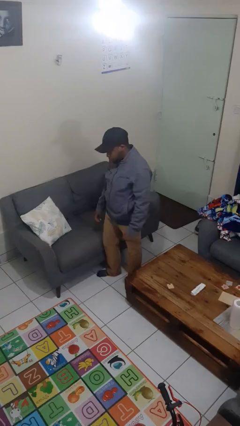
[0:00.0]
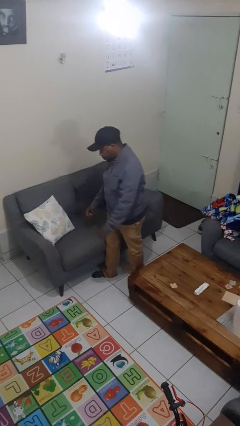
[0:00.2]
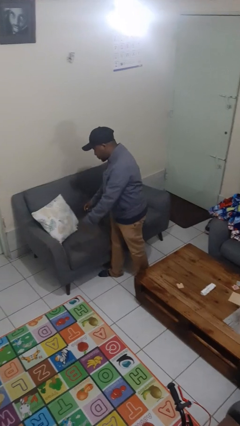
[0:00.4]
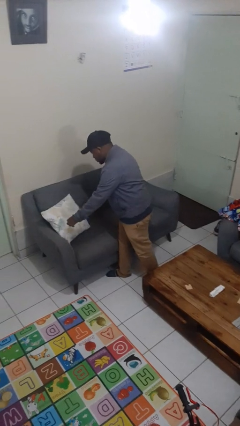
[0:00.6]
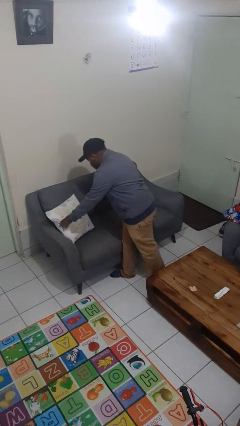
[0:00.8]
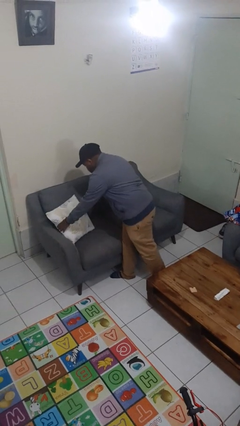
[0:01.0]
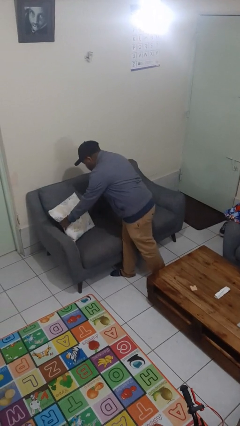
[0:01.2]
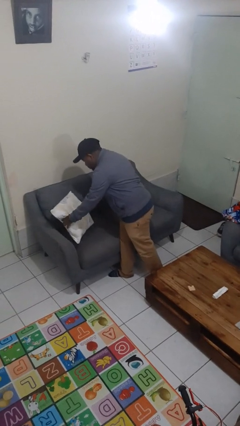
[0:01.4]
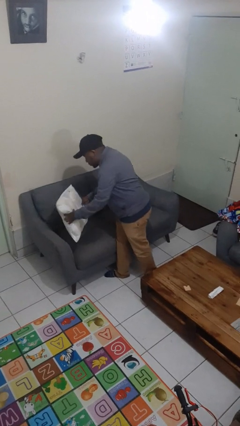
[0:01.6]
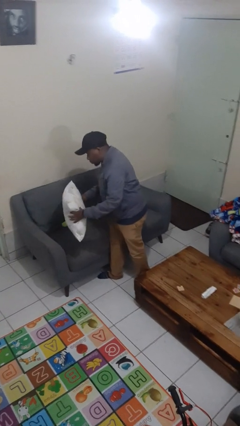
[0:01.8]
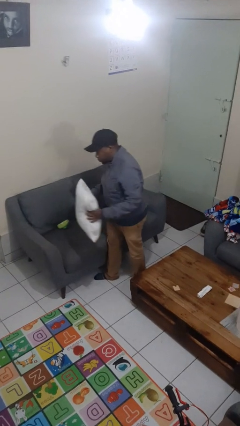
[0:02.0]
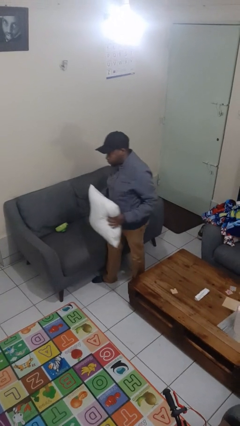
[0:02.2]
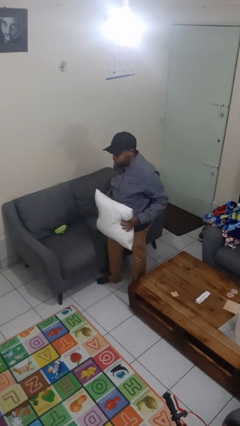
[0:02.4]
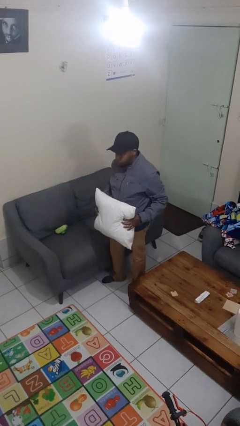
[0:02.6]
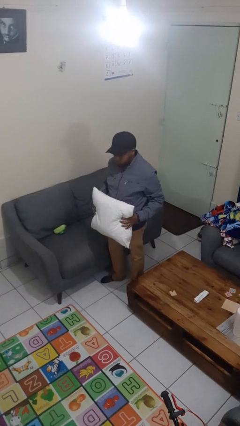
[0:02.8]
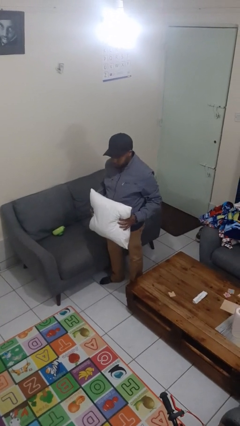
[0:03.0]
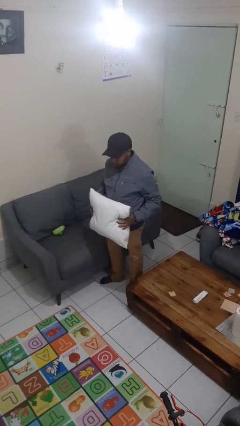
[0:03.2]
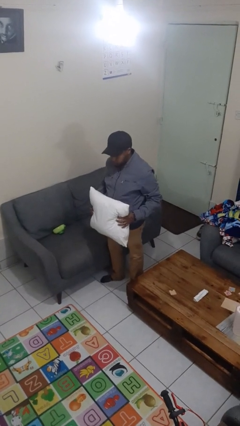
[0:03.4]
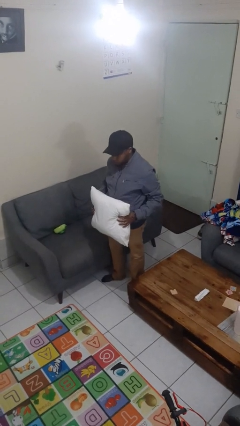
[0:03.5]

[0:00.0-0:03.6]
person picks up object from couch

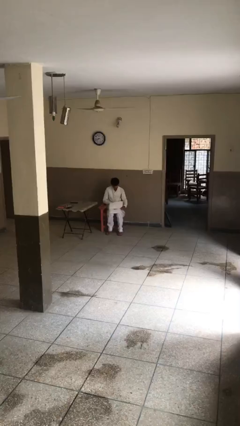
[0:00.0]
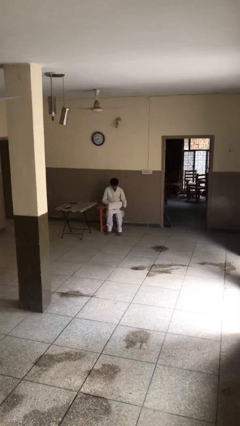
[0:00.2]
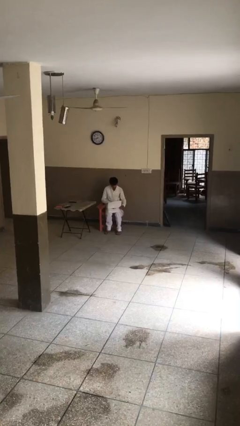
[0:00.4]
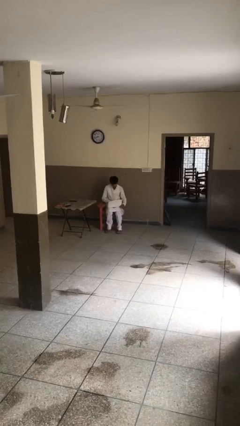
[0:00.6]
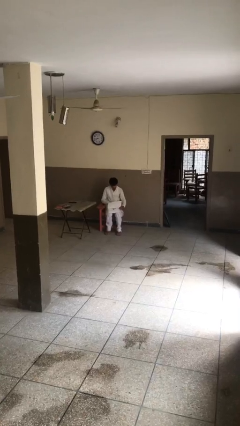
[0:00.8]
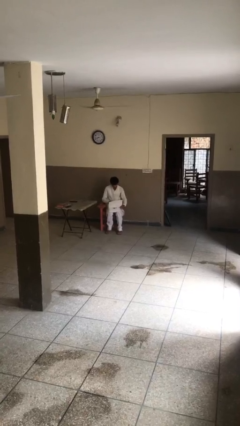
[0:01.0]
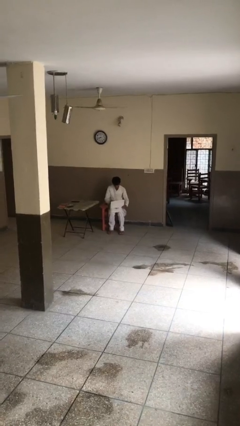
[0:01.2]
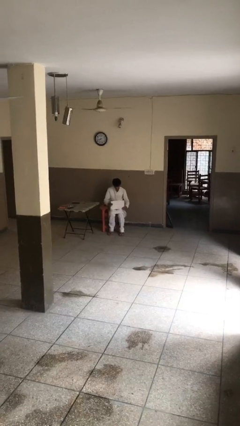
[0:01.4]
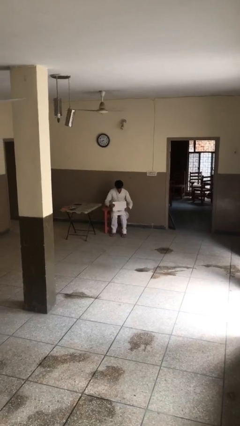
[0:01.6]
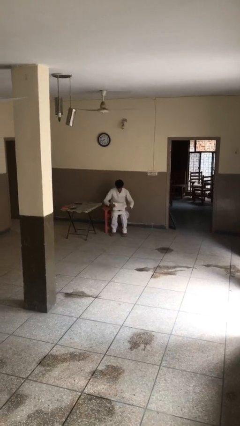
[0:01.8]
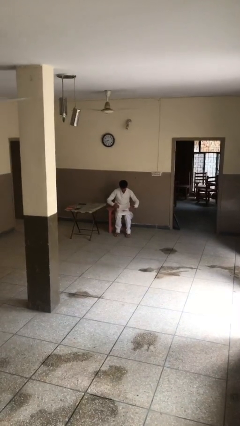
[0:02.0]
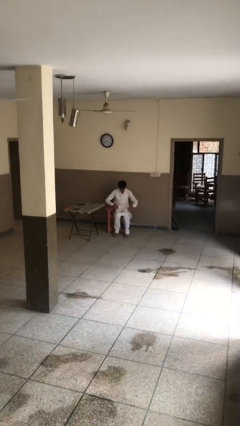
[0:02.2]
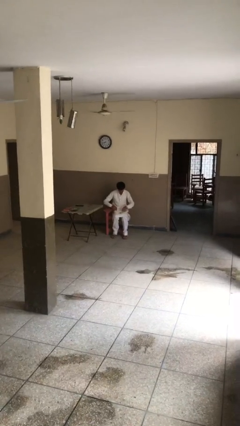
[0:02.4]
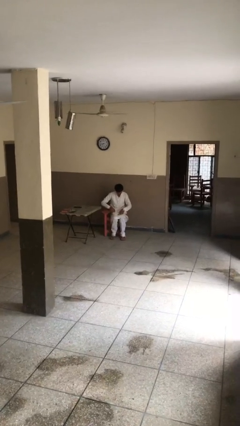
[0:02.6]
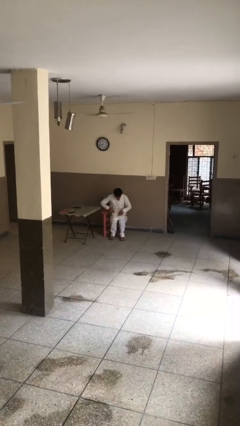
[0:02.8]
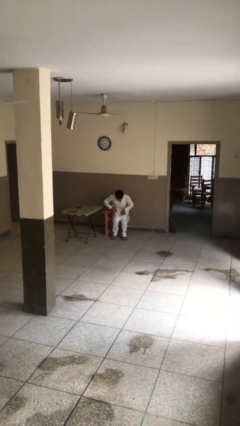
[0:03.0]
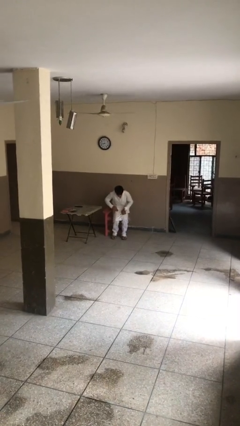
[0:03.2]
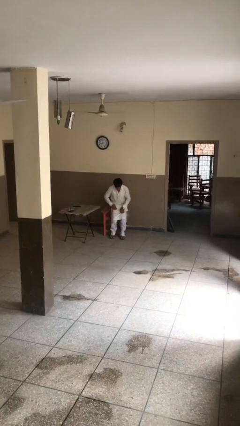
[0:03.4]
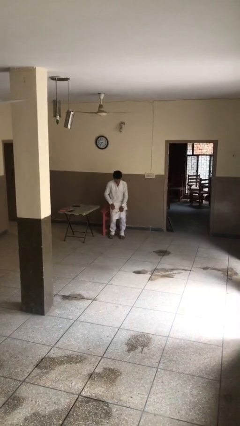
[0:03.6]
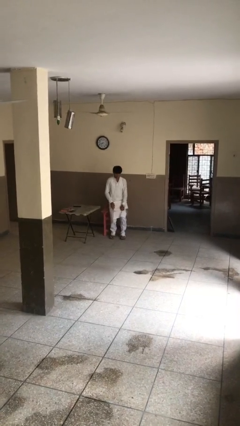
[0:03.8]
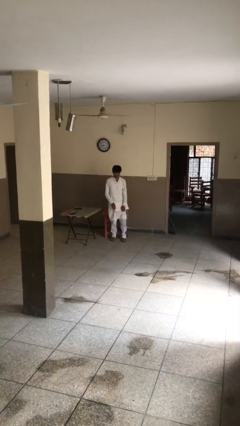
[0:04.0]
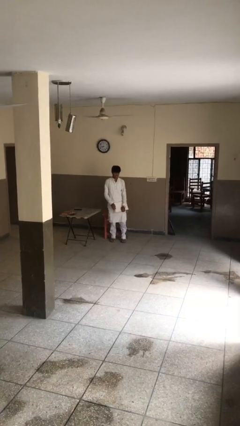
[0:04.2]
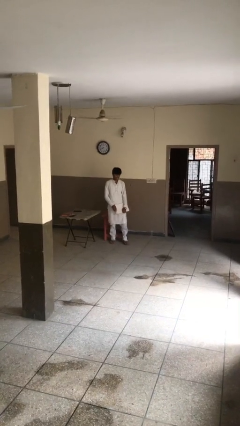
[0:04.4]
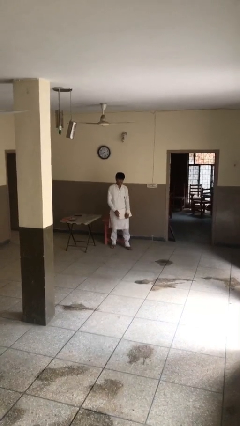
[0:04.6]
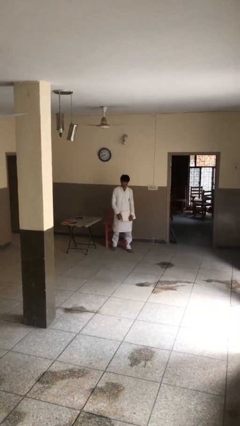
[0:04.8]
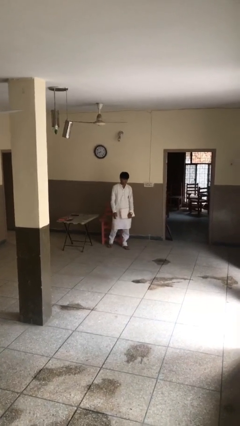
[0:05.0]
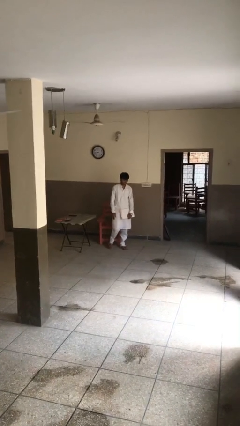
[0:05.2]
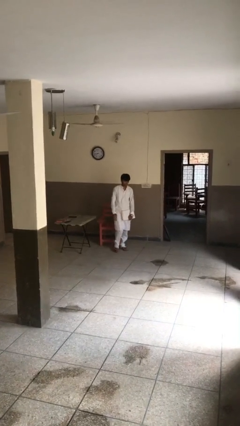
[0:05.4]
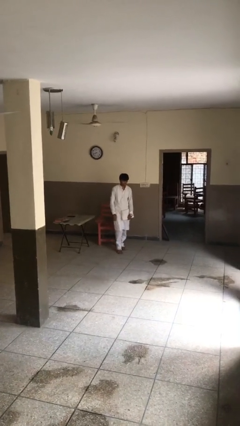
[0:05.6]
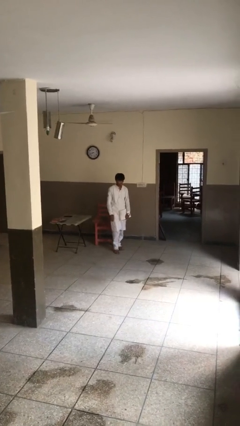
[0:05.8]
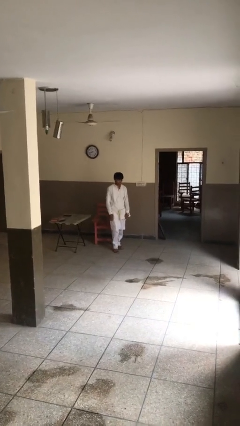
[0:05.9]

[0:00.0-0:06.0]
person stands up

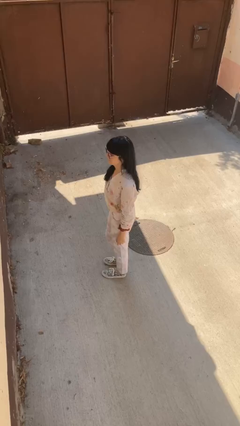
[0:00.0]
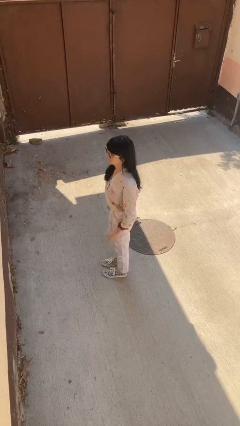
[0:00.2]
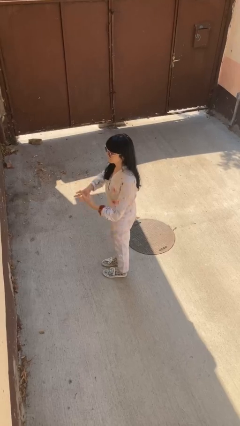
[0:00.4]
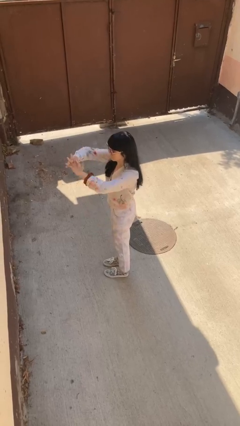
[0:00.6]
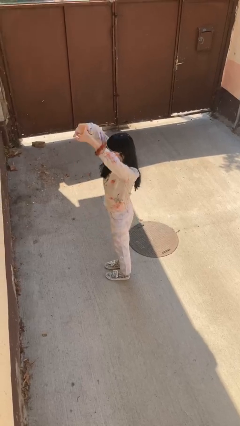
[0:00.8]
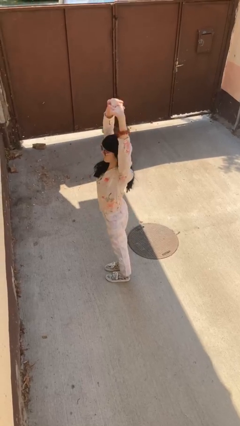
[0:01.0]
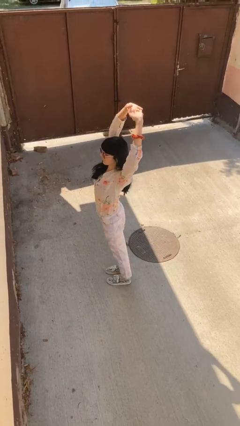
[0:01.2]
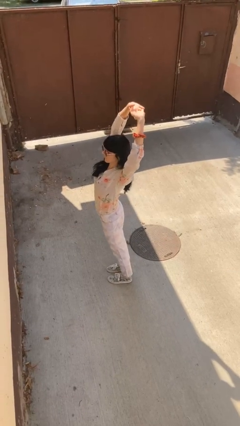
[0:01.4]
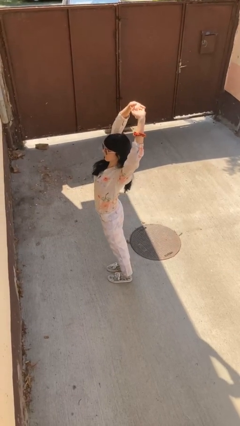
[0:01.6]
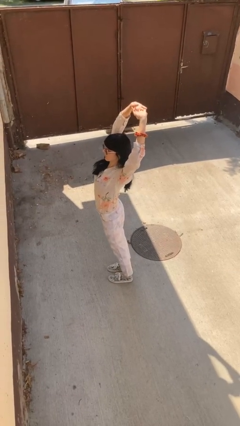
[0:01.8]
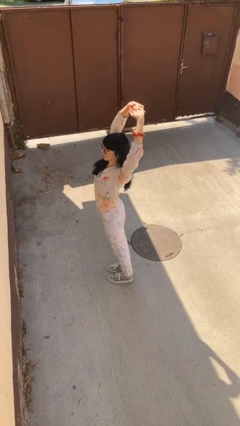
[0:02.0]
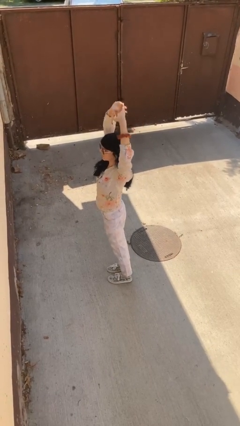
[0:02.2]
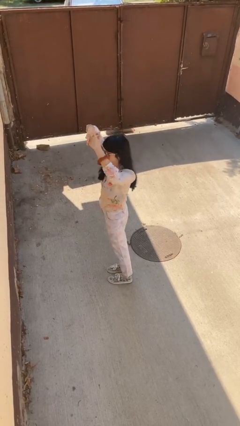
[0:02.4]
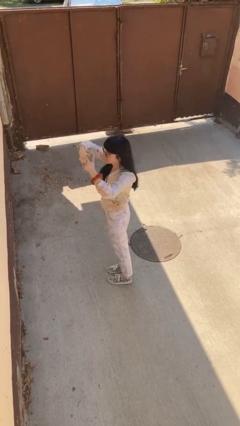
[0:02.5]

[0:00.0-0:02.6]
person stretches arms over head

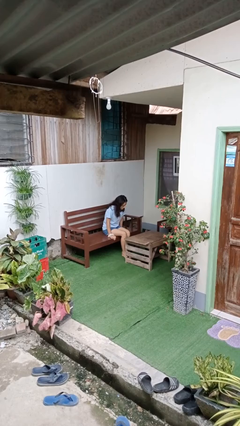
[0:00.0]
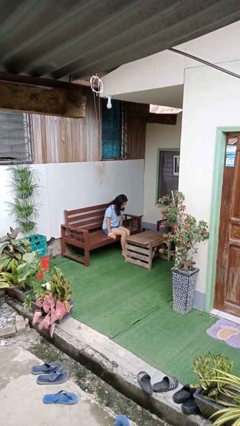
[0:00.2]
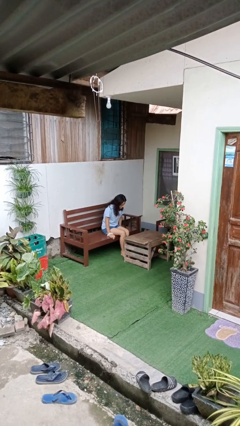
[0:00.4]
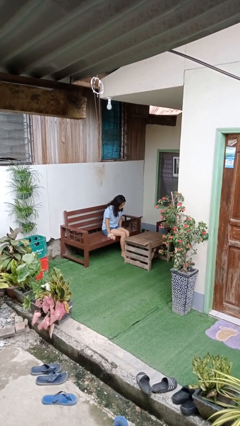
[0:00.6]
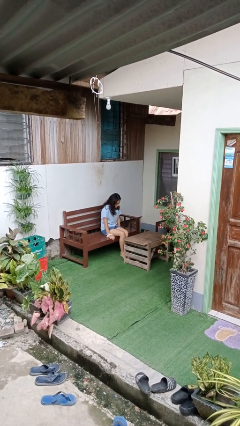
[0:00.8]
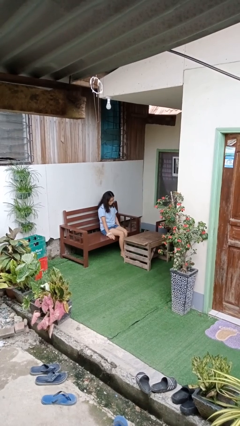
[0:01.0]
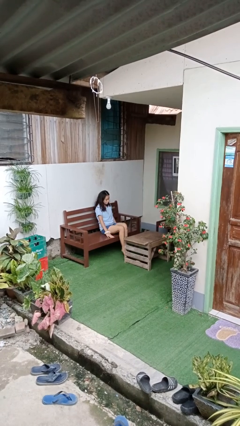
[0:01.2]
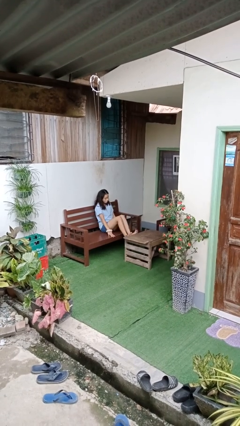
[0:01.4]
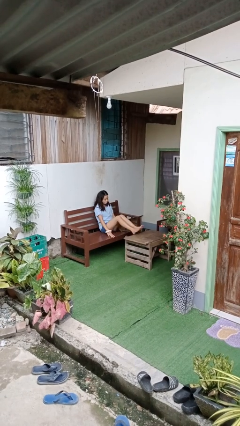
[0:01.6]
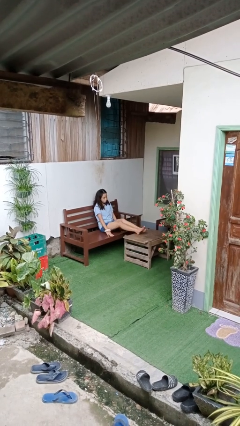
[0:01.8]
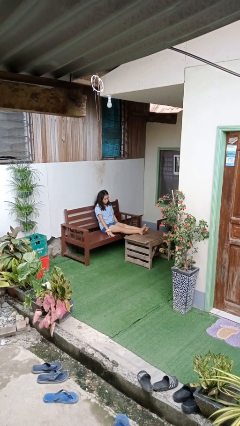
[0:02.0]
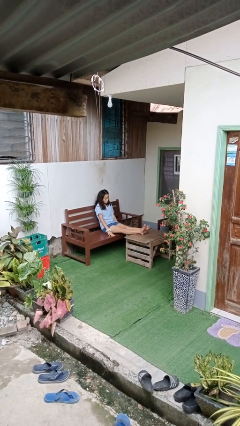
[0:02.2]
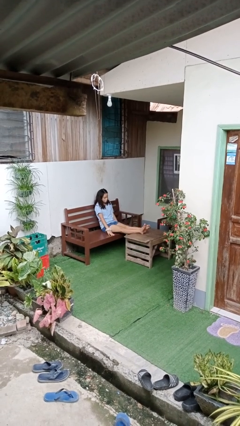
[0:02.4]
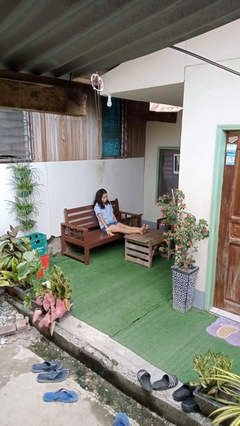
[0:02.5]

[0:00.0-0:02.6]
person puts feet up

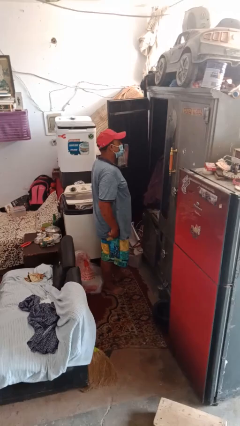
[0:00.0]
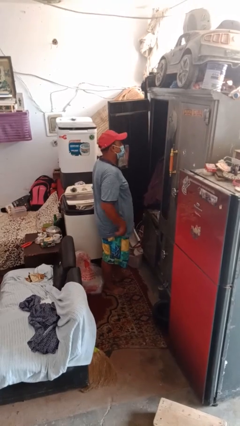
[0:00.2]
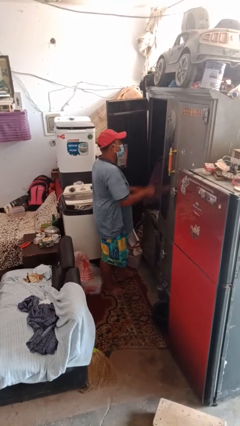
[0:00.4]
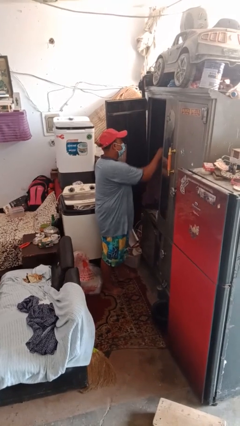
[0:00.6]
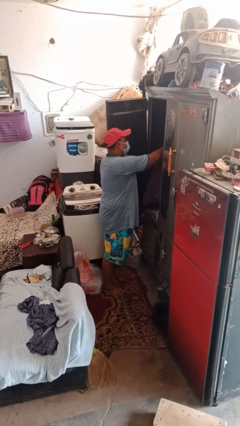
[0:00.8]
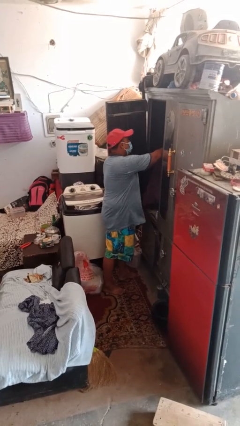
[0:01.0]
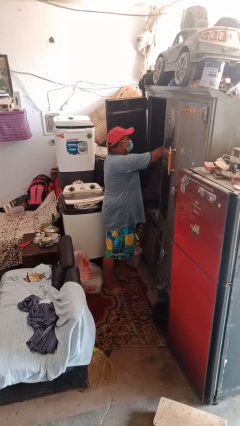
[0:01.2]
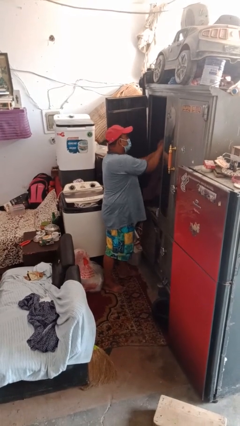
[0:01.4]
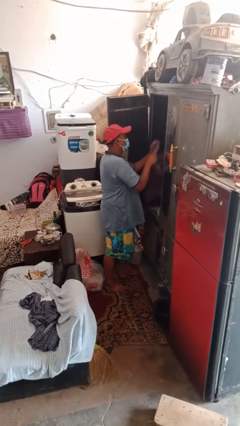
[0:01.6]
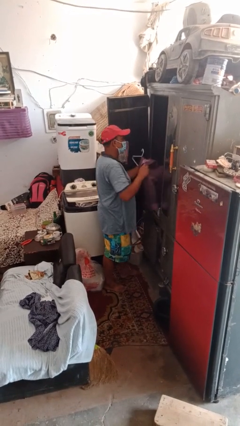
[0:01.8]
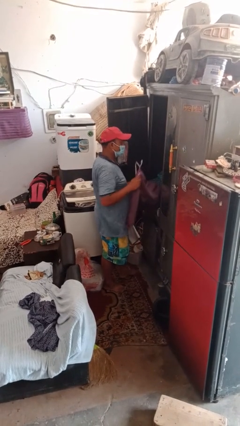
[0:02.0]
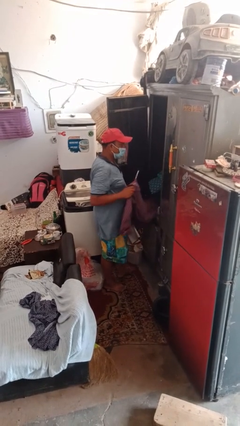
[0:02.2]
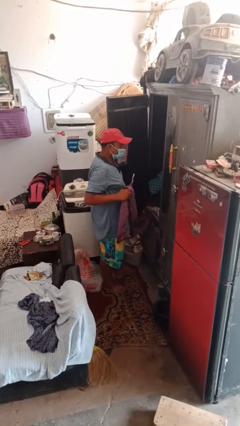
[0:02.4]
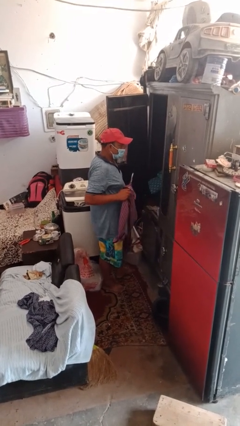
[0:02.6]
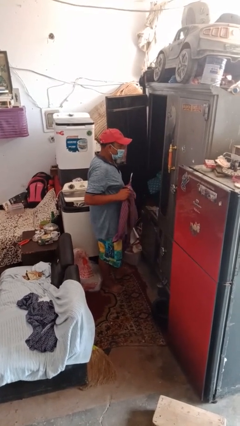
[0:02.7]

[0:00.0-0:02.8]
person takes clothes from closet

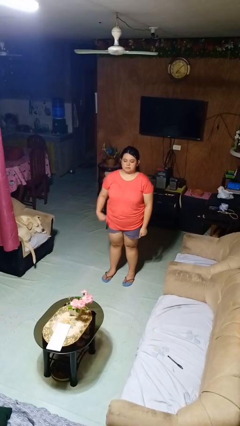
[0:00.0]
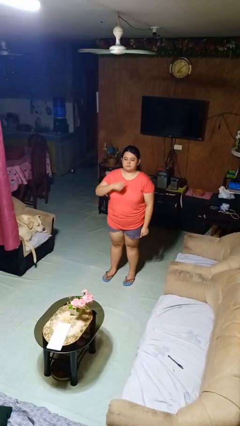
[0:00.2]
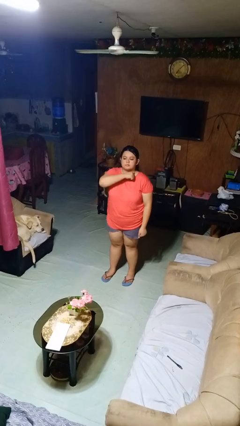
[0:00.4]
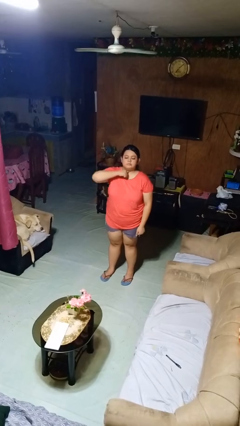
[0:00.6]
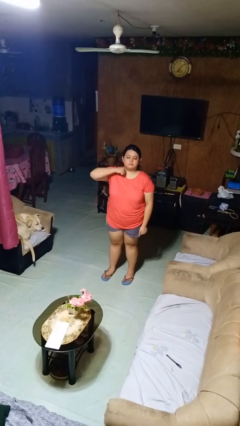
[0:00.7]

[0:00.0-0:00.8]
person gestures cut
